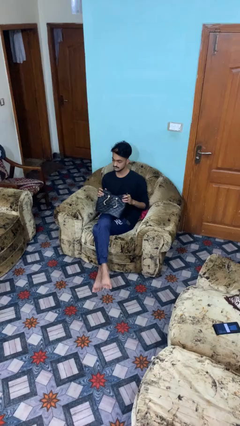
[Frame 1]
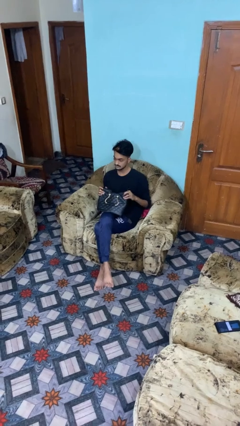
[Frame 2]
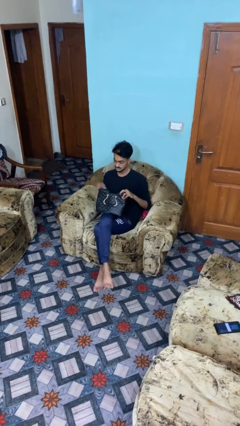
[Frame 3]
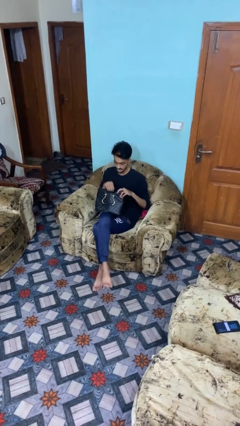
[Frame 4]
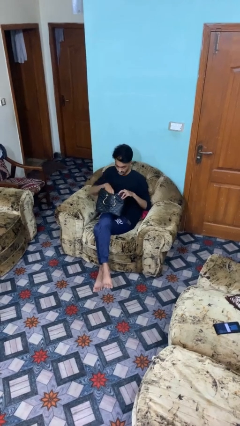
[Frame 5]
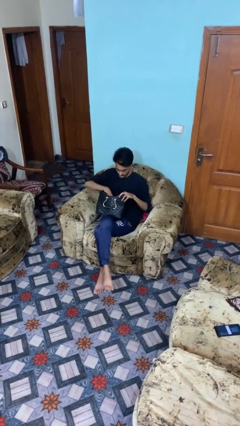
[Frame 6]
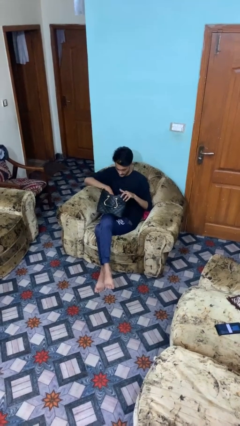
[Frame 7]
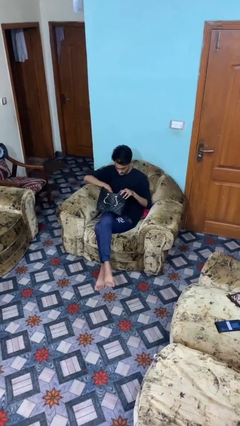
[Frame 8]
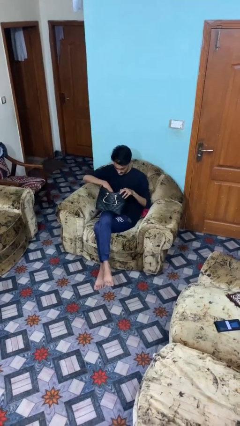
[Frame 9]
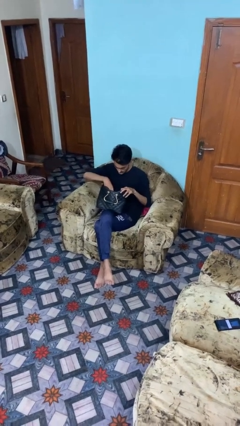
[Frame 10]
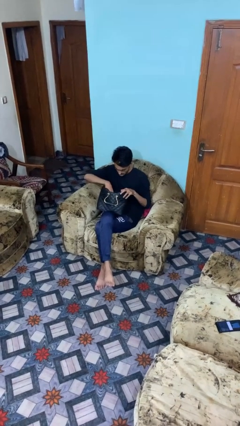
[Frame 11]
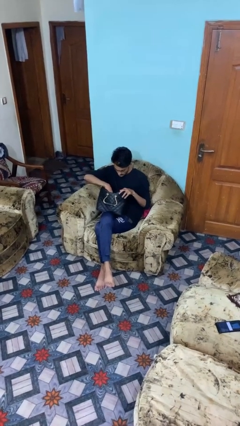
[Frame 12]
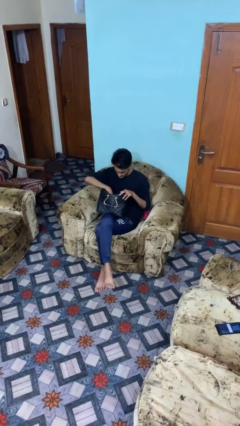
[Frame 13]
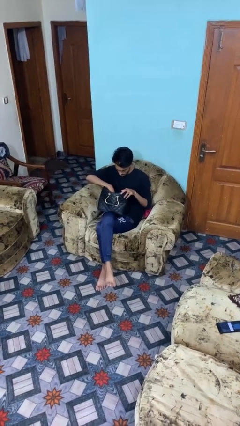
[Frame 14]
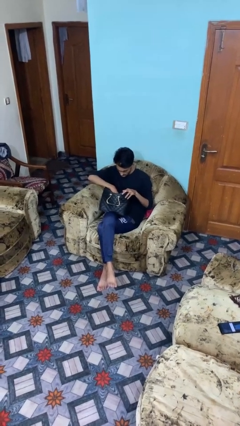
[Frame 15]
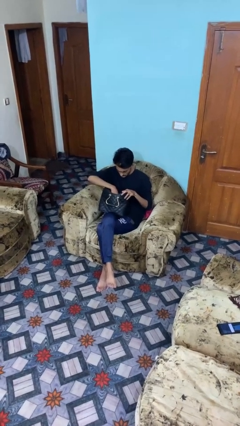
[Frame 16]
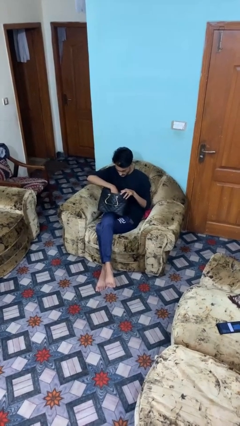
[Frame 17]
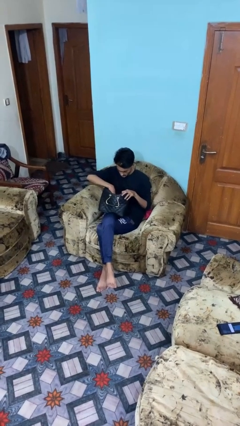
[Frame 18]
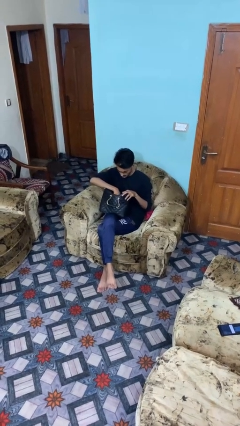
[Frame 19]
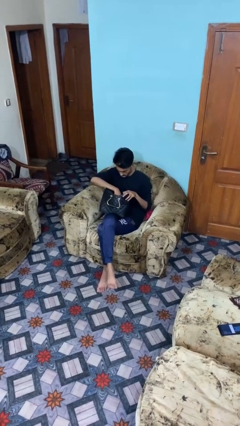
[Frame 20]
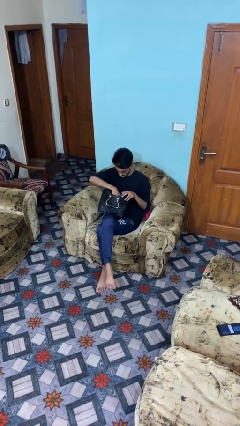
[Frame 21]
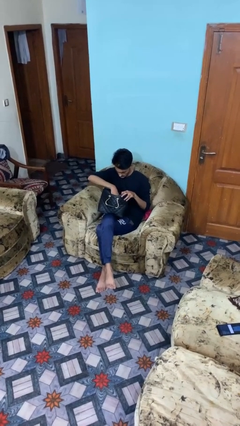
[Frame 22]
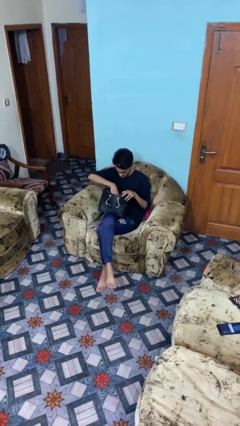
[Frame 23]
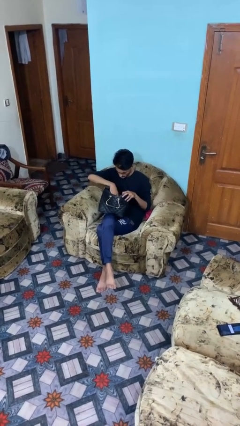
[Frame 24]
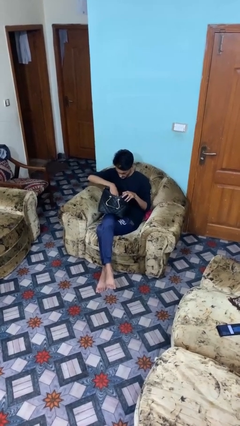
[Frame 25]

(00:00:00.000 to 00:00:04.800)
person searches in purse

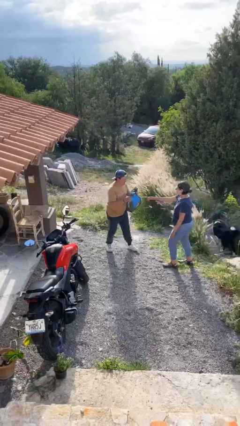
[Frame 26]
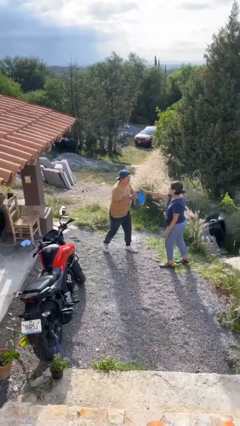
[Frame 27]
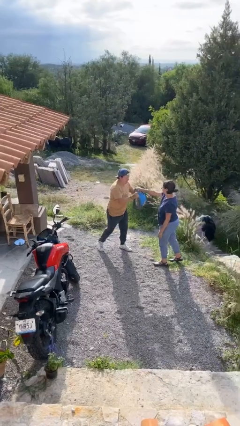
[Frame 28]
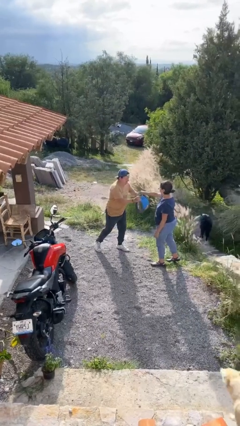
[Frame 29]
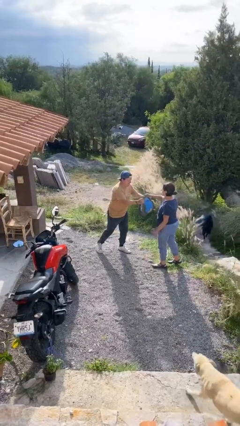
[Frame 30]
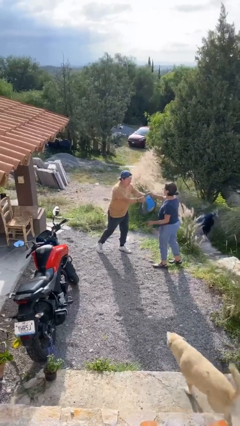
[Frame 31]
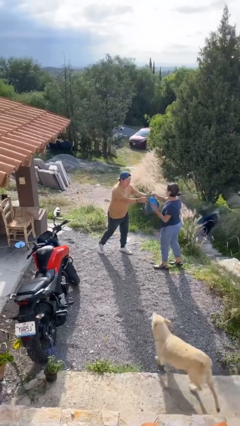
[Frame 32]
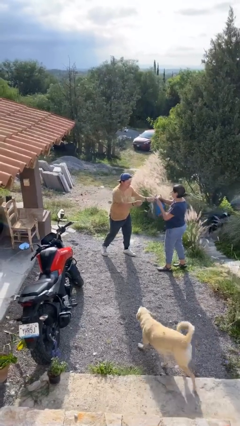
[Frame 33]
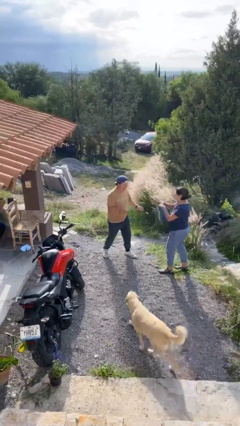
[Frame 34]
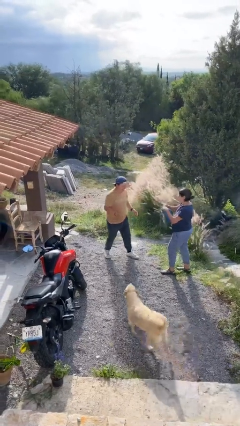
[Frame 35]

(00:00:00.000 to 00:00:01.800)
person transfers object to person

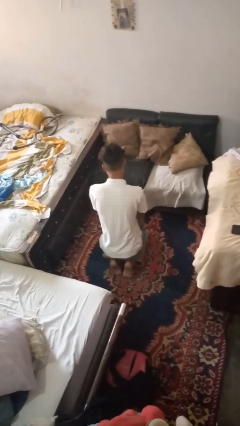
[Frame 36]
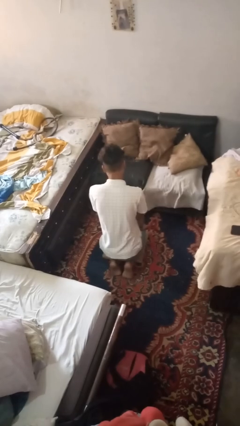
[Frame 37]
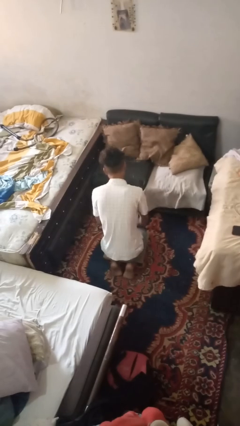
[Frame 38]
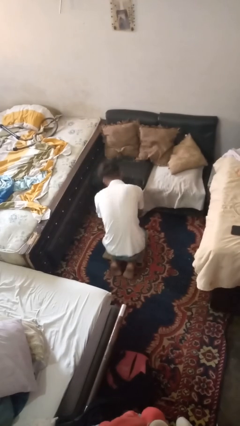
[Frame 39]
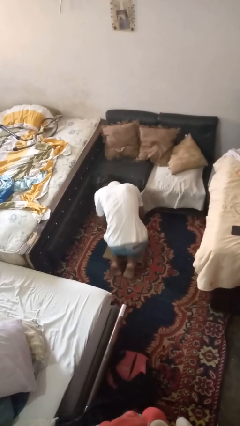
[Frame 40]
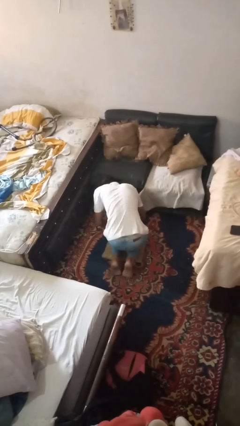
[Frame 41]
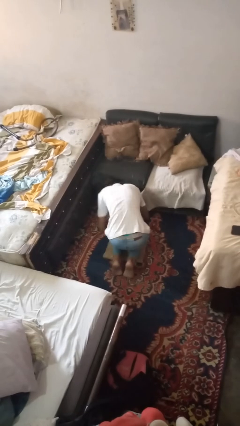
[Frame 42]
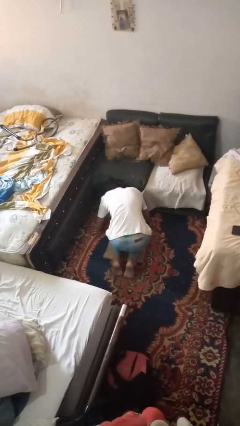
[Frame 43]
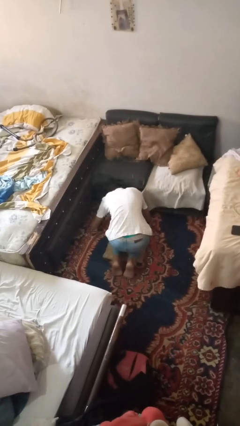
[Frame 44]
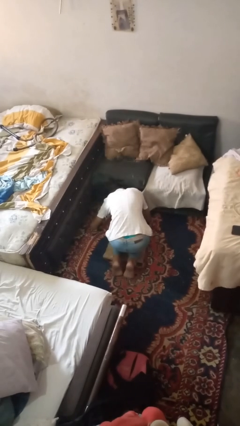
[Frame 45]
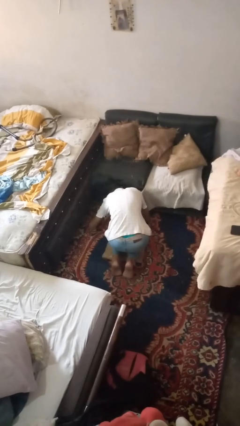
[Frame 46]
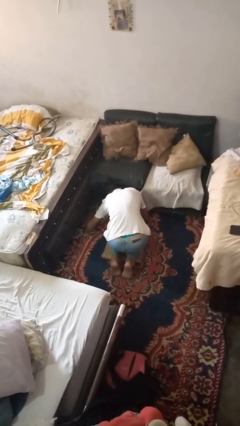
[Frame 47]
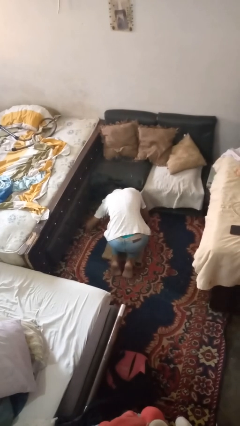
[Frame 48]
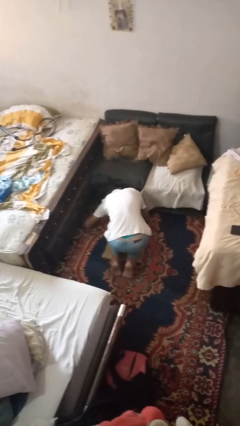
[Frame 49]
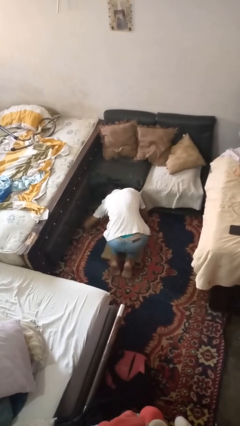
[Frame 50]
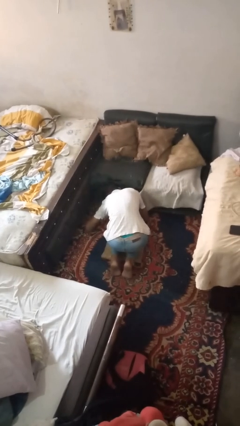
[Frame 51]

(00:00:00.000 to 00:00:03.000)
person searches under couch

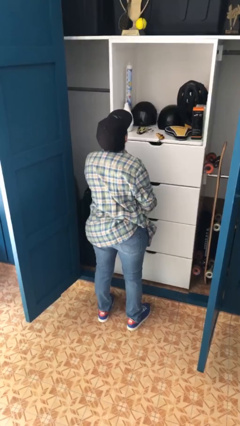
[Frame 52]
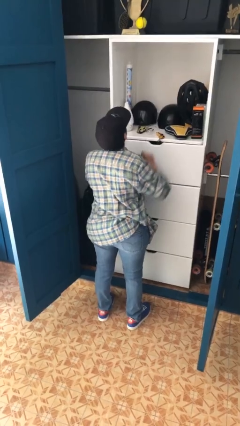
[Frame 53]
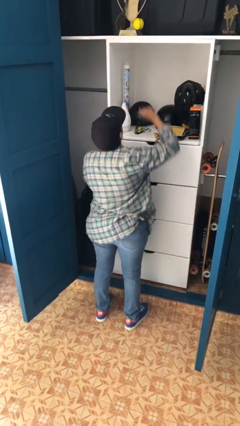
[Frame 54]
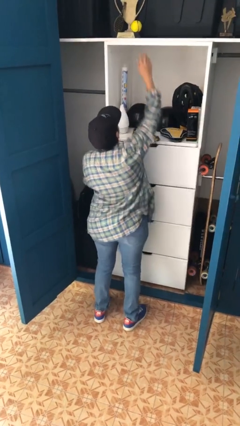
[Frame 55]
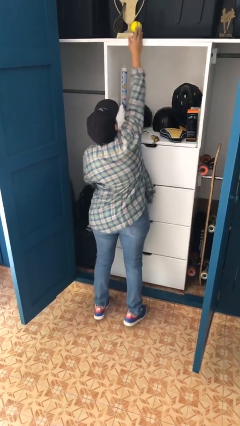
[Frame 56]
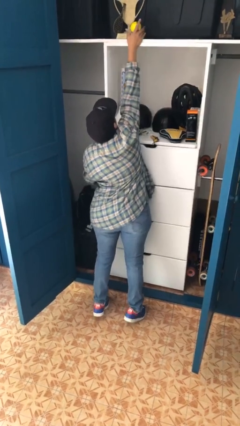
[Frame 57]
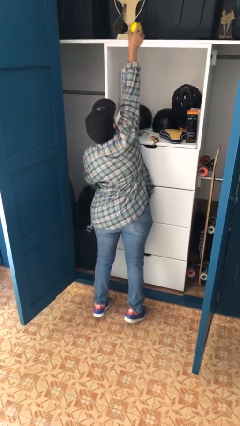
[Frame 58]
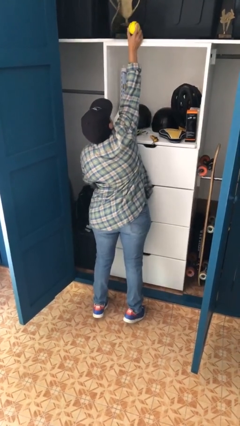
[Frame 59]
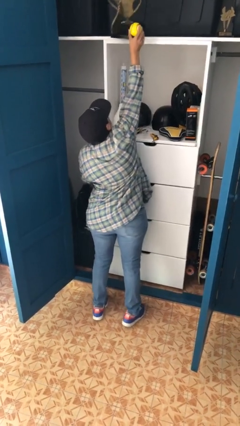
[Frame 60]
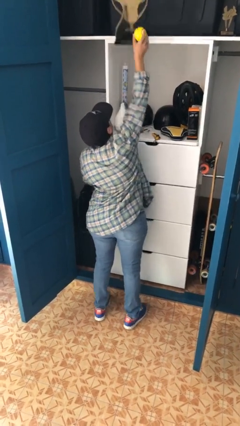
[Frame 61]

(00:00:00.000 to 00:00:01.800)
person picks up object from shelf

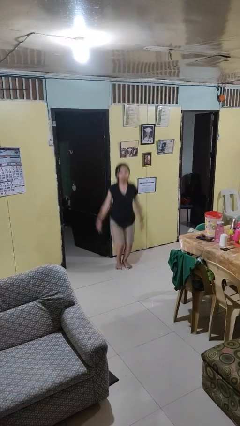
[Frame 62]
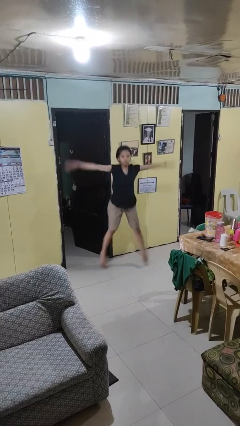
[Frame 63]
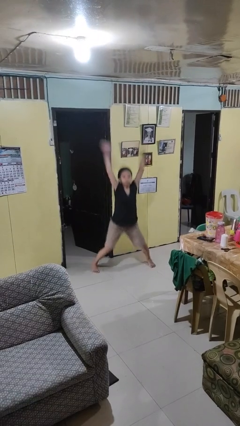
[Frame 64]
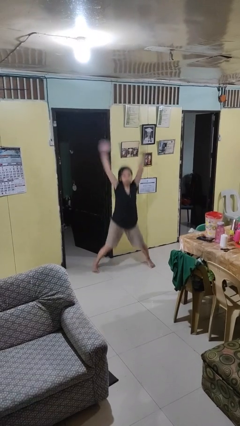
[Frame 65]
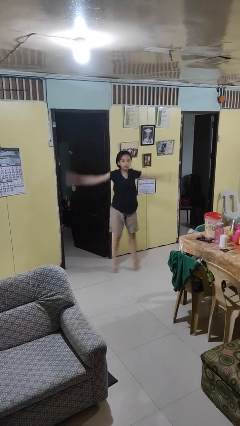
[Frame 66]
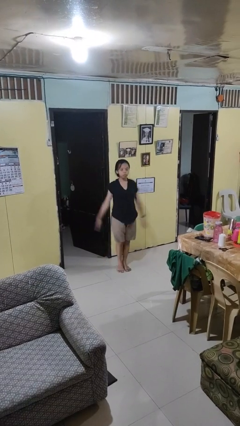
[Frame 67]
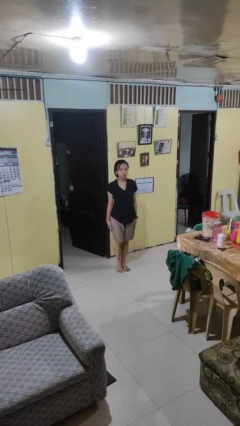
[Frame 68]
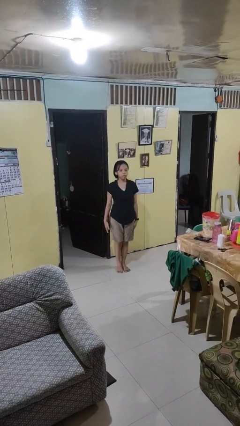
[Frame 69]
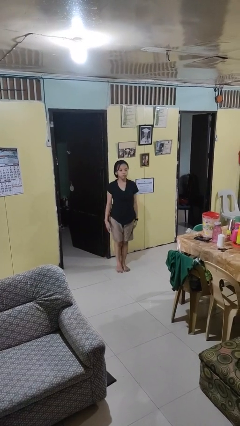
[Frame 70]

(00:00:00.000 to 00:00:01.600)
person exercises with jumping jacks

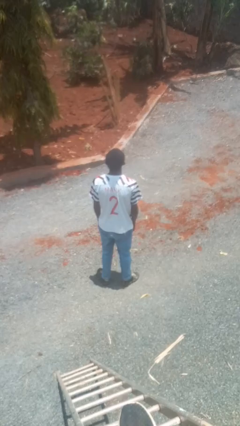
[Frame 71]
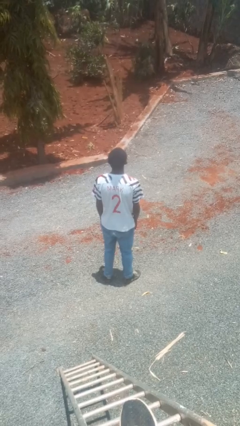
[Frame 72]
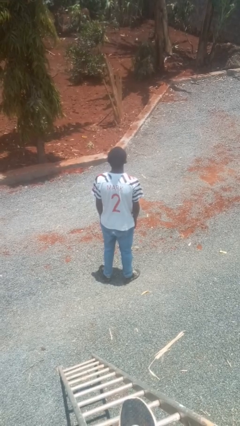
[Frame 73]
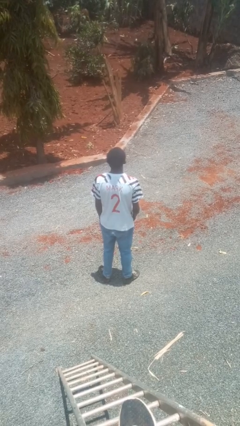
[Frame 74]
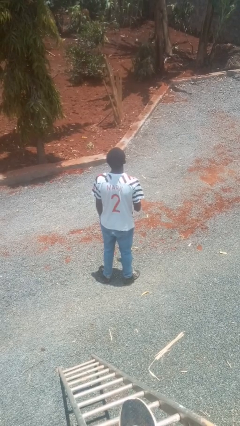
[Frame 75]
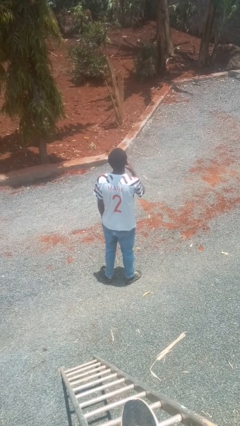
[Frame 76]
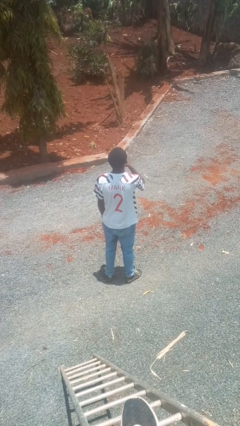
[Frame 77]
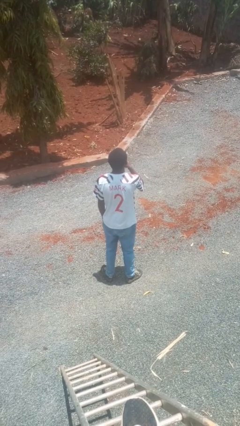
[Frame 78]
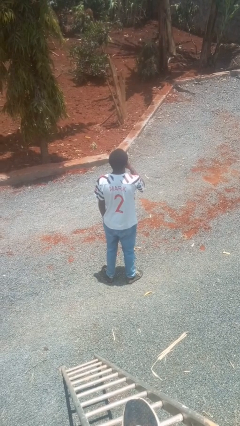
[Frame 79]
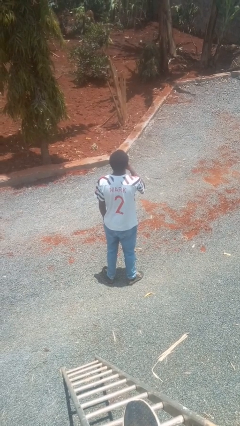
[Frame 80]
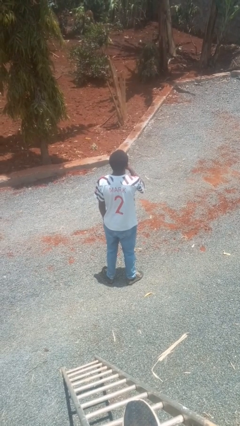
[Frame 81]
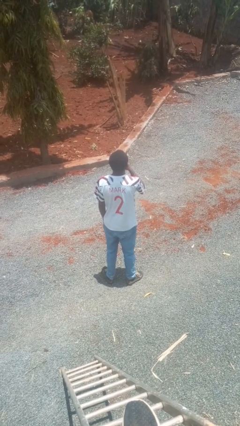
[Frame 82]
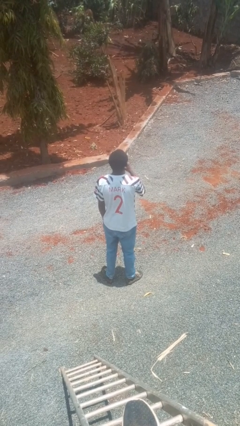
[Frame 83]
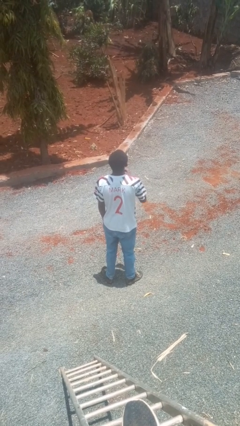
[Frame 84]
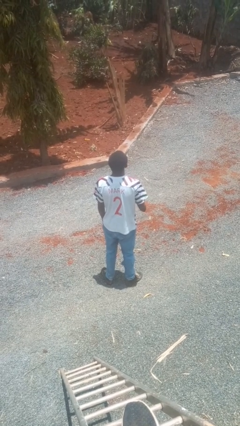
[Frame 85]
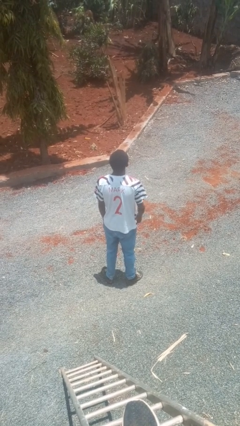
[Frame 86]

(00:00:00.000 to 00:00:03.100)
person strokes chin

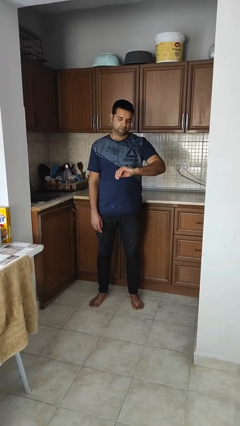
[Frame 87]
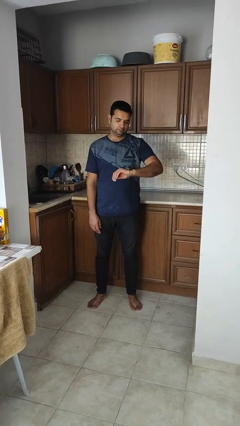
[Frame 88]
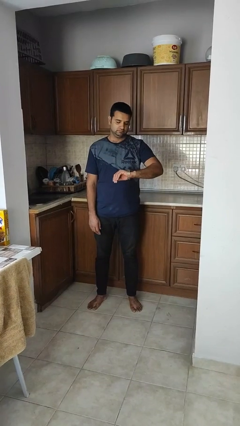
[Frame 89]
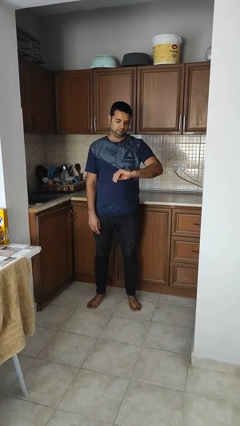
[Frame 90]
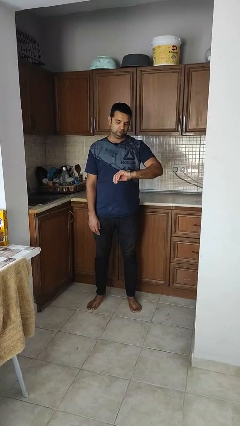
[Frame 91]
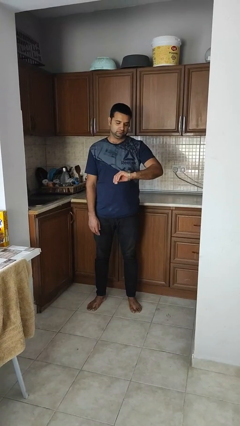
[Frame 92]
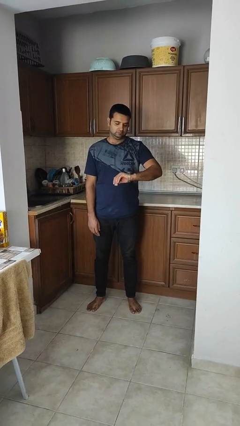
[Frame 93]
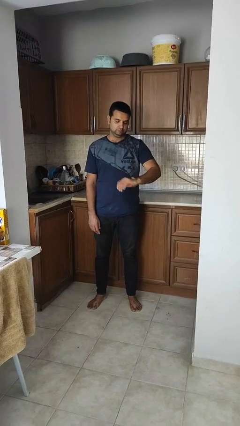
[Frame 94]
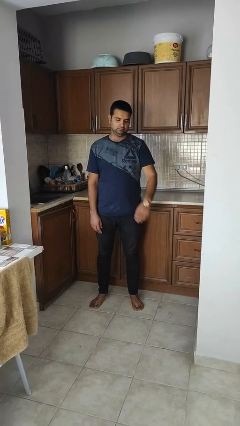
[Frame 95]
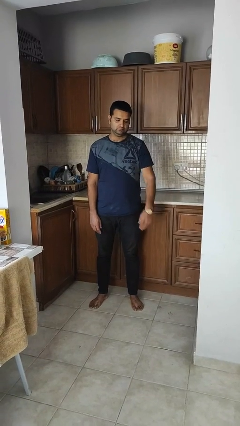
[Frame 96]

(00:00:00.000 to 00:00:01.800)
person looks at wristwatch
